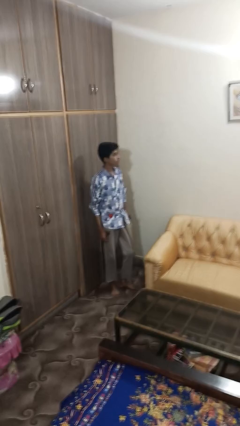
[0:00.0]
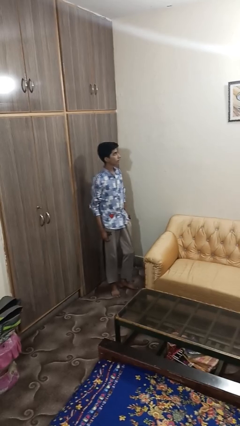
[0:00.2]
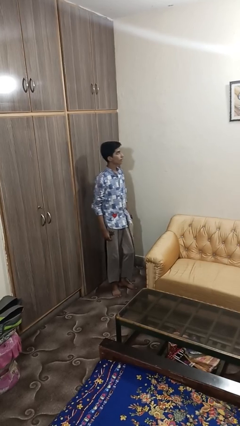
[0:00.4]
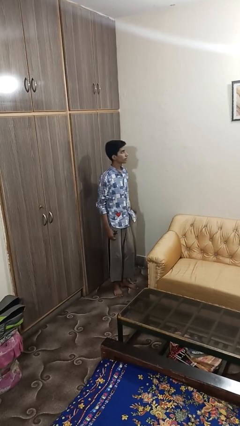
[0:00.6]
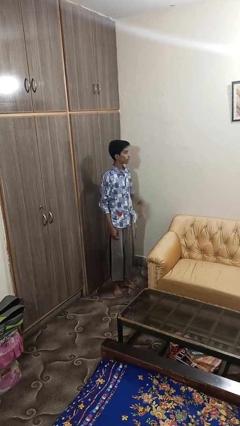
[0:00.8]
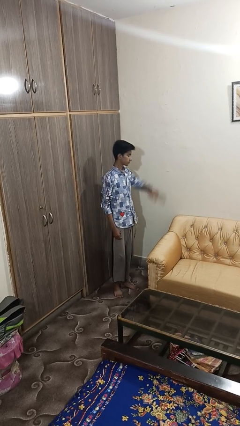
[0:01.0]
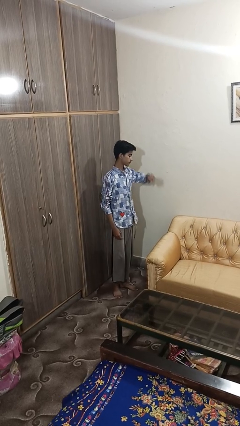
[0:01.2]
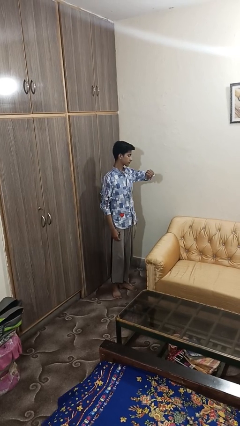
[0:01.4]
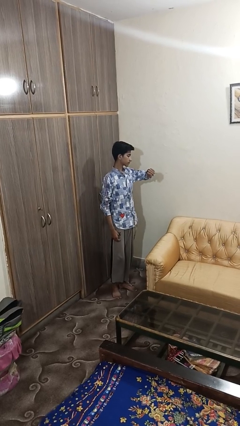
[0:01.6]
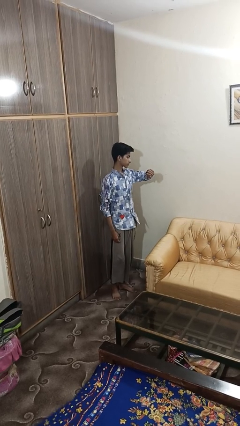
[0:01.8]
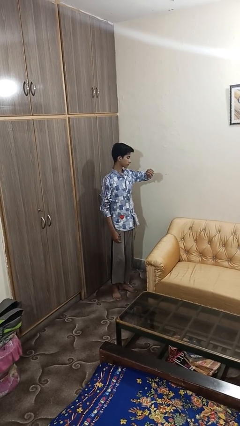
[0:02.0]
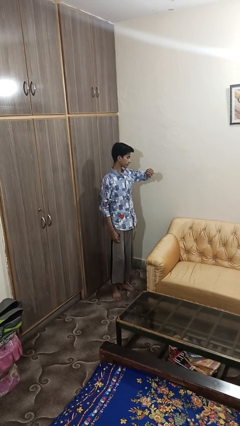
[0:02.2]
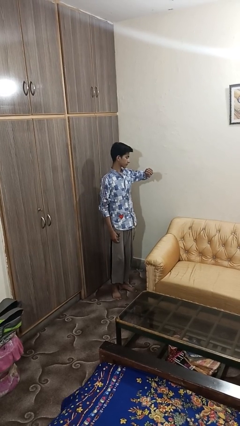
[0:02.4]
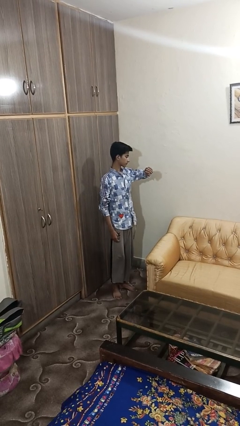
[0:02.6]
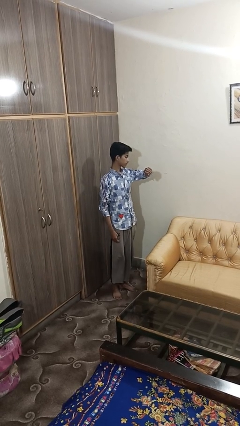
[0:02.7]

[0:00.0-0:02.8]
person looks at wristwatch

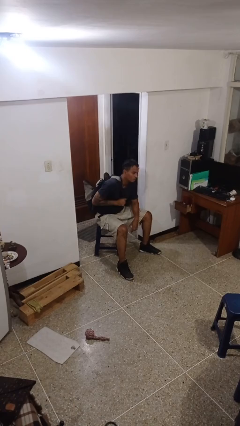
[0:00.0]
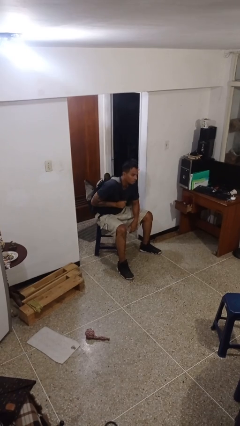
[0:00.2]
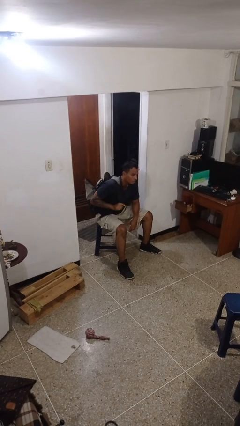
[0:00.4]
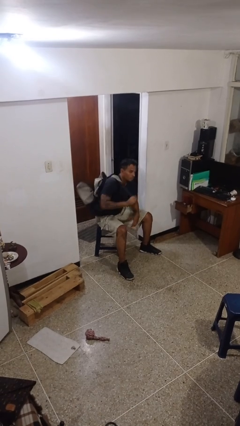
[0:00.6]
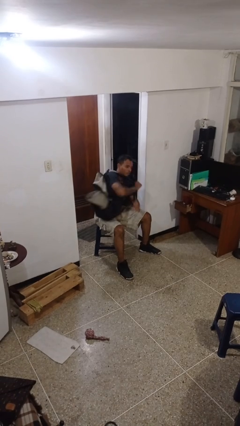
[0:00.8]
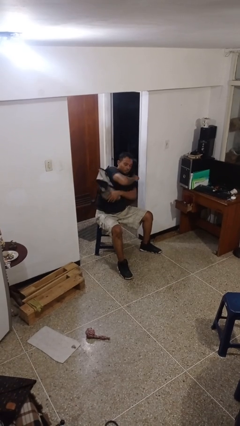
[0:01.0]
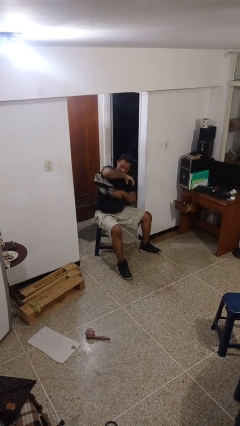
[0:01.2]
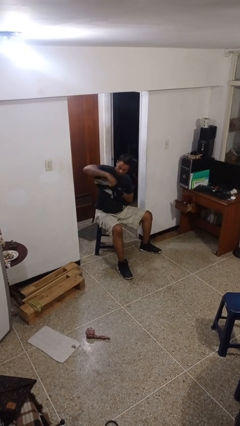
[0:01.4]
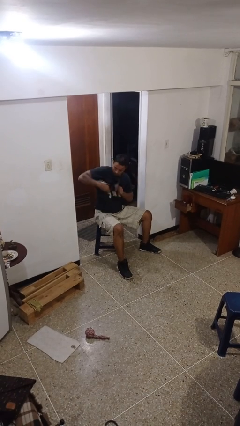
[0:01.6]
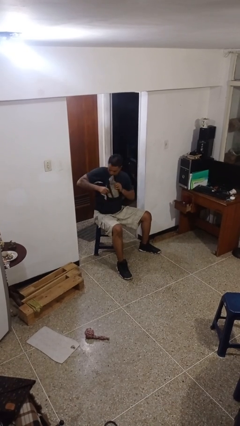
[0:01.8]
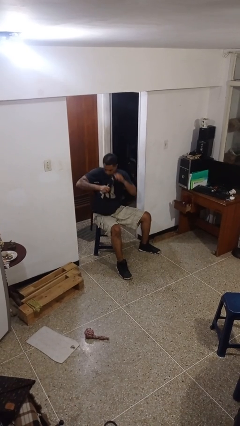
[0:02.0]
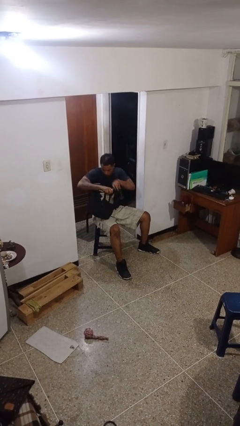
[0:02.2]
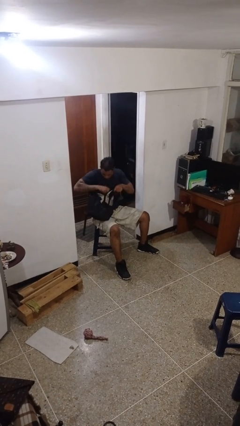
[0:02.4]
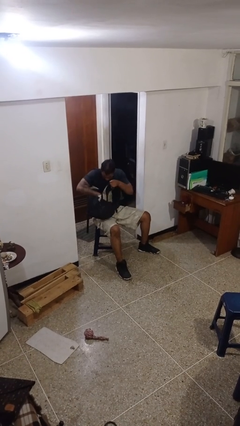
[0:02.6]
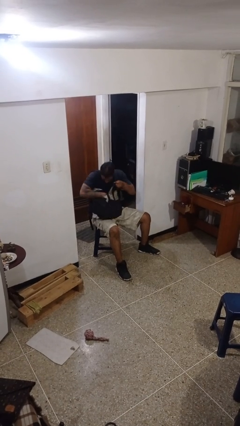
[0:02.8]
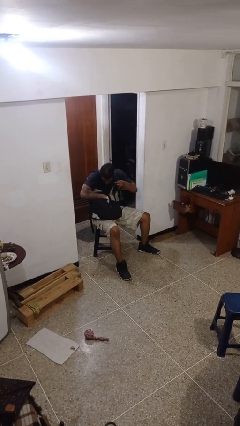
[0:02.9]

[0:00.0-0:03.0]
person searches in backpack

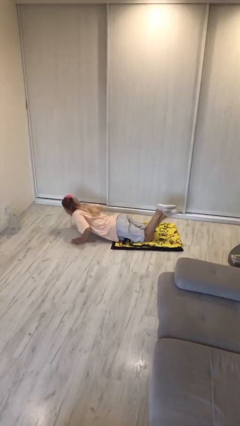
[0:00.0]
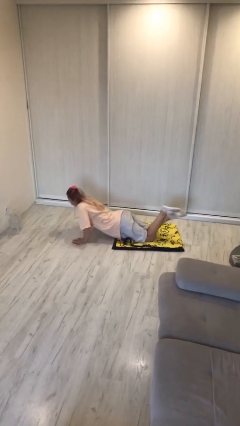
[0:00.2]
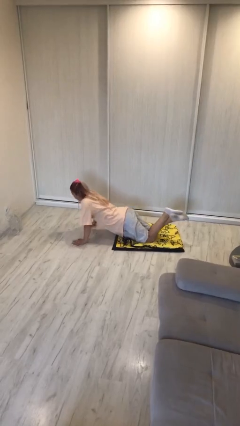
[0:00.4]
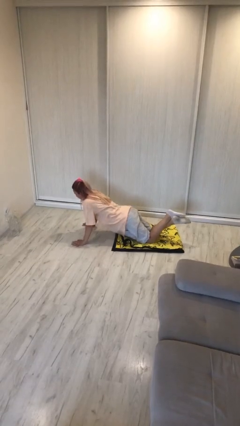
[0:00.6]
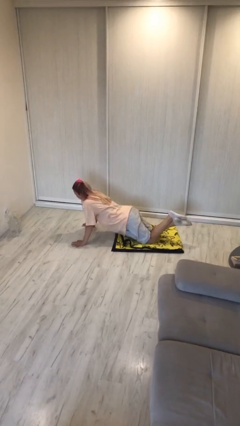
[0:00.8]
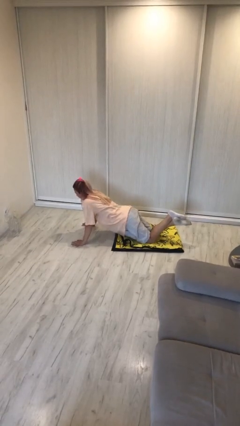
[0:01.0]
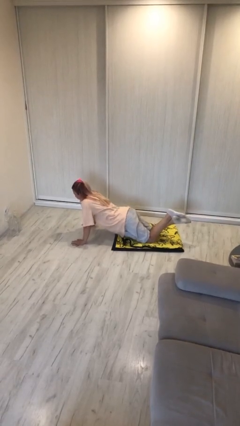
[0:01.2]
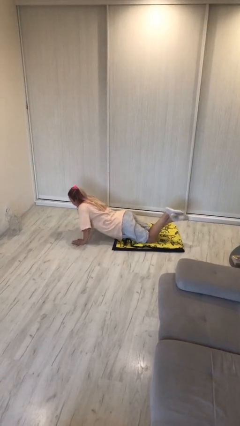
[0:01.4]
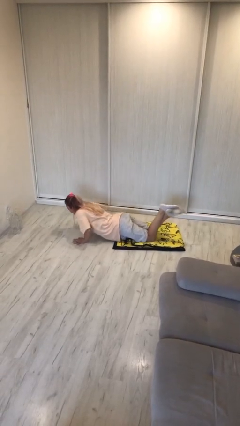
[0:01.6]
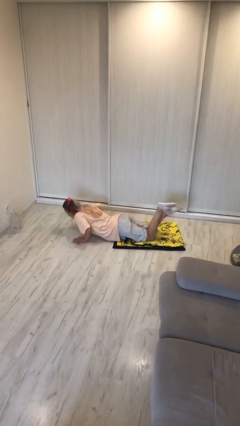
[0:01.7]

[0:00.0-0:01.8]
person exercises with pushup

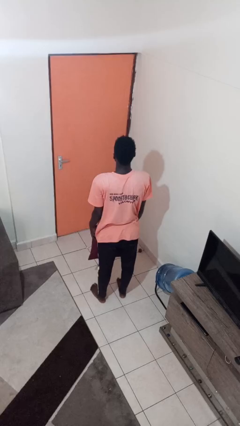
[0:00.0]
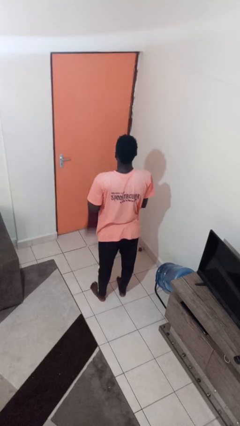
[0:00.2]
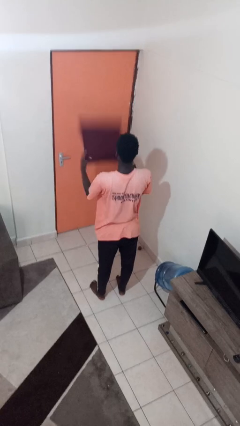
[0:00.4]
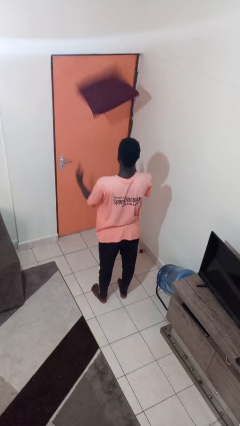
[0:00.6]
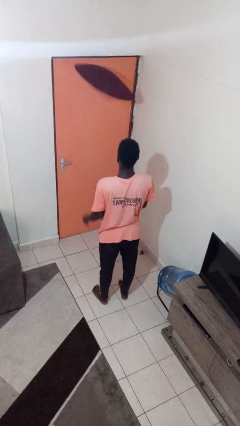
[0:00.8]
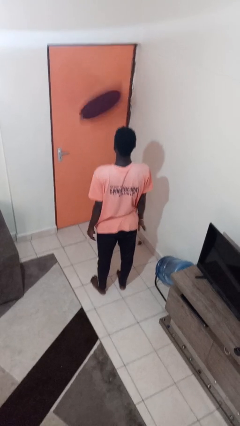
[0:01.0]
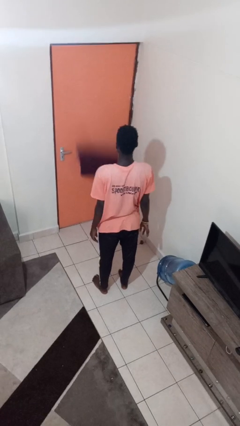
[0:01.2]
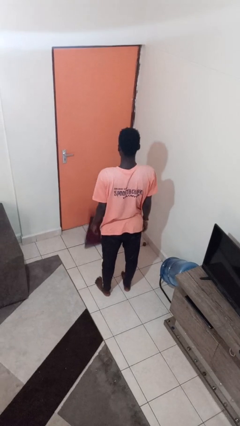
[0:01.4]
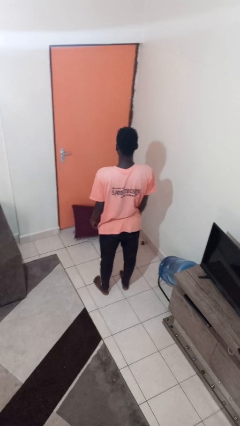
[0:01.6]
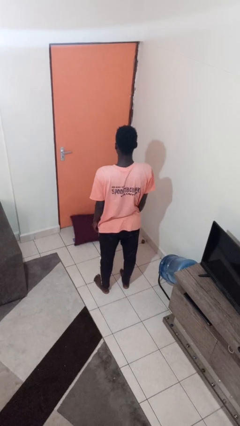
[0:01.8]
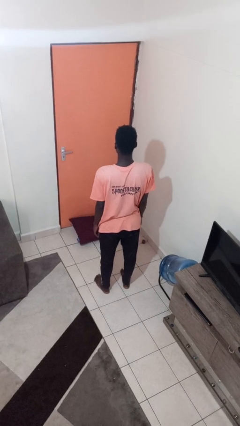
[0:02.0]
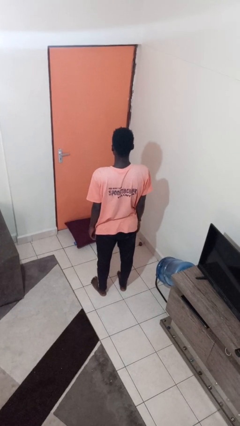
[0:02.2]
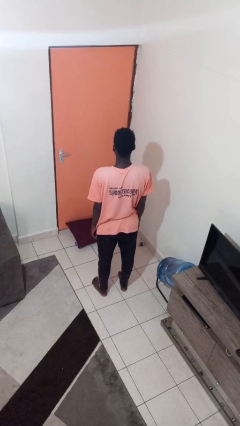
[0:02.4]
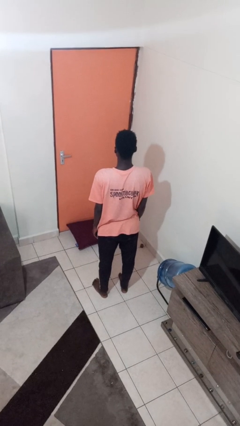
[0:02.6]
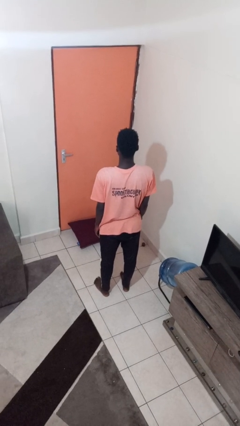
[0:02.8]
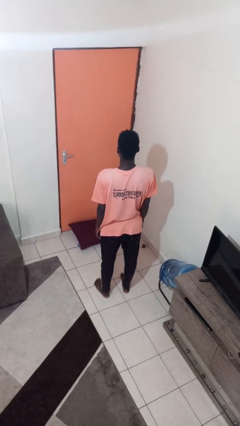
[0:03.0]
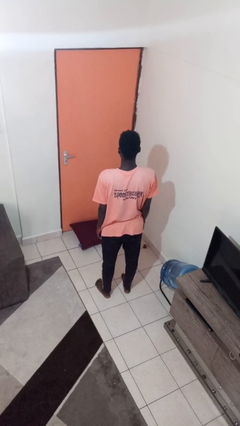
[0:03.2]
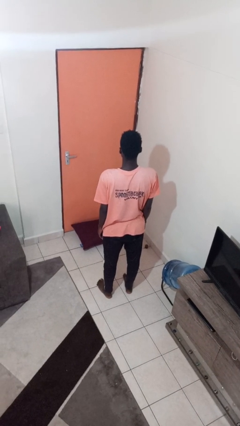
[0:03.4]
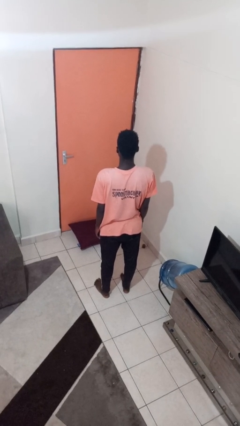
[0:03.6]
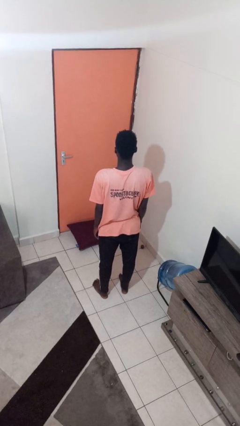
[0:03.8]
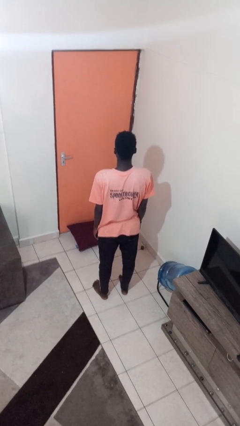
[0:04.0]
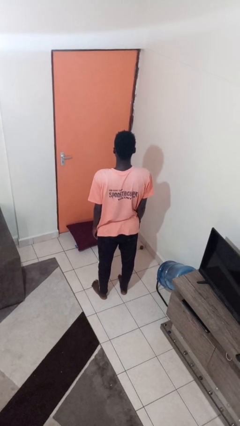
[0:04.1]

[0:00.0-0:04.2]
person throws object into air

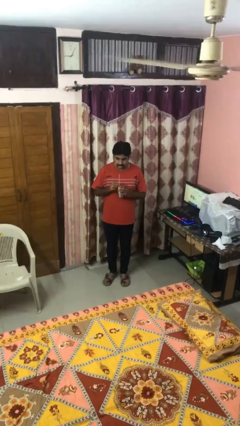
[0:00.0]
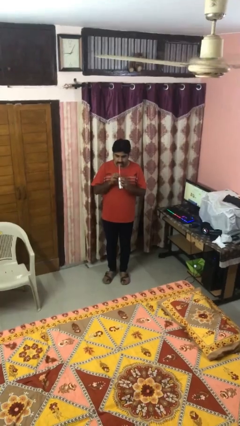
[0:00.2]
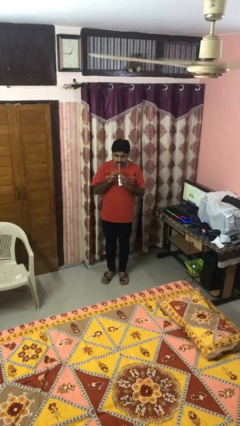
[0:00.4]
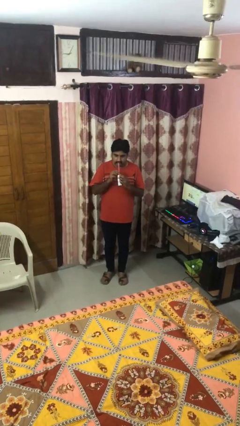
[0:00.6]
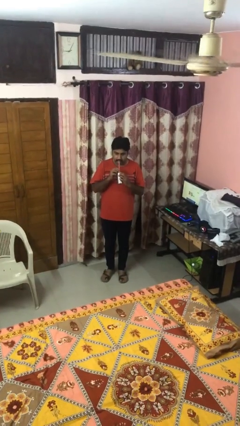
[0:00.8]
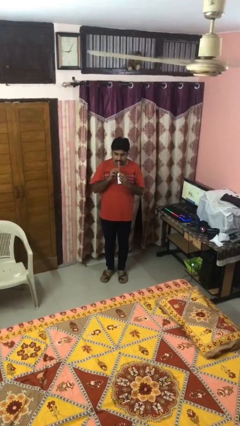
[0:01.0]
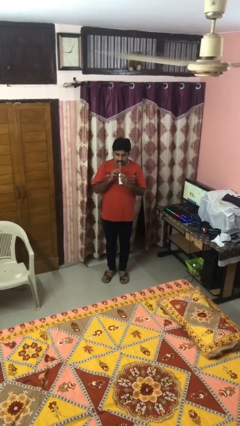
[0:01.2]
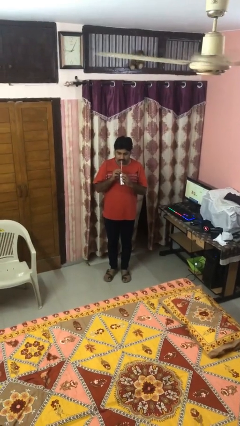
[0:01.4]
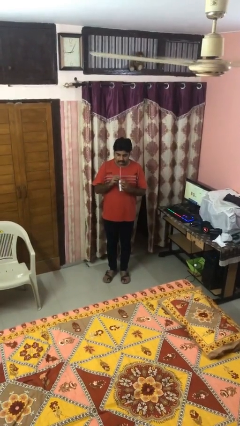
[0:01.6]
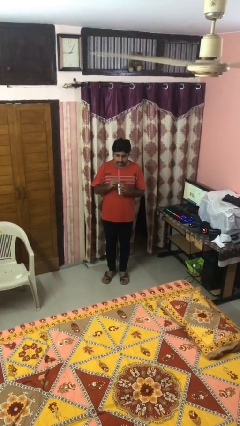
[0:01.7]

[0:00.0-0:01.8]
person drinks from straw

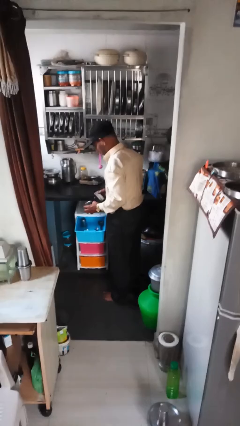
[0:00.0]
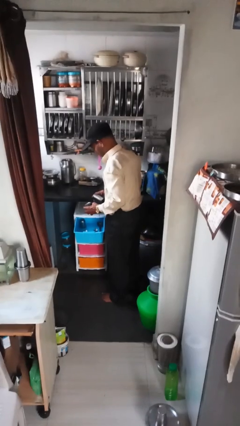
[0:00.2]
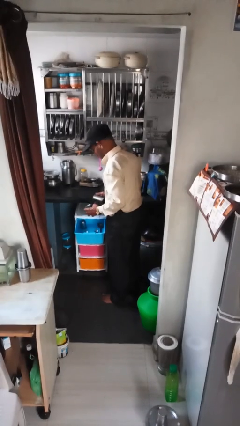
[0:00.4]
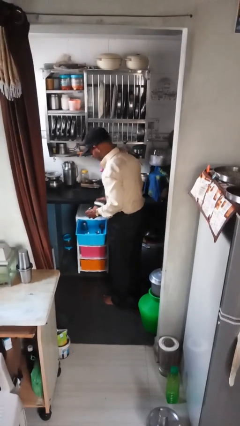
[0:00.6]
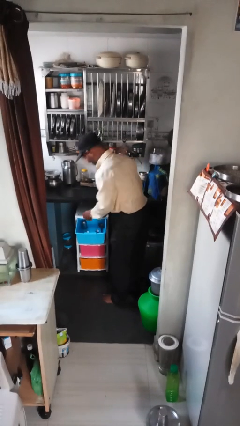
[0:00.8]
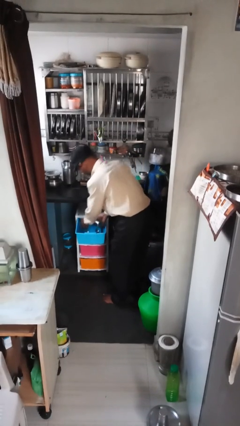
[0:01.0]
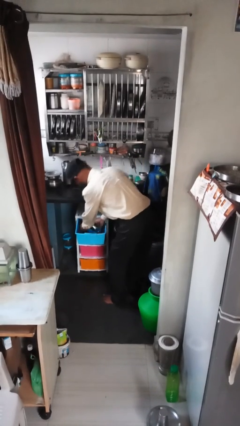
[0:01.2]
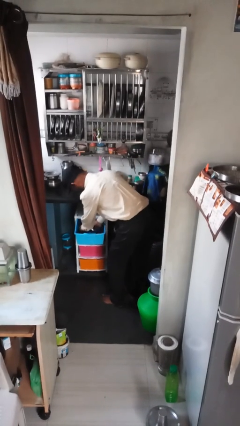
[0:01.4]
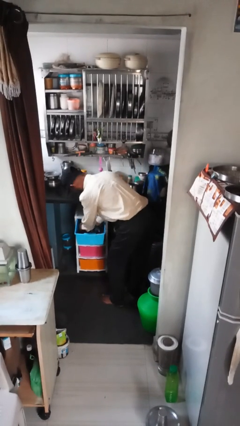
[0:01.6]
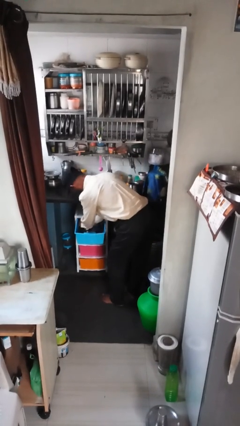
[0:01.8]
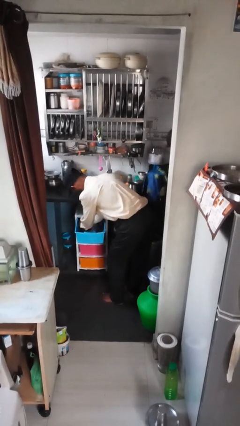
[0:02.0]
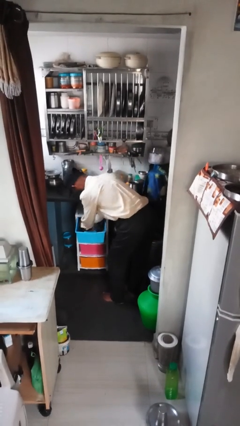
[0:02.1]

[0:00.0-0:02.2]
person puts object into kitchen drawer

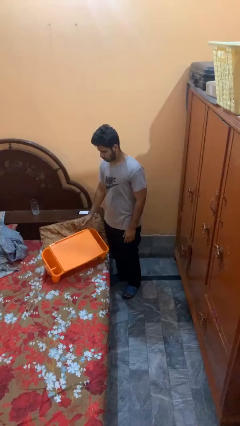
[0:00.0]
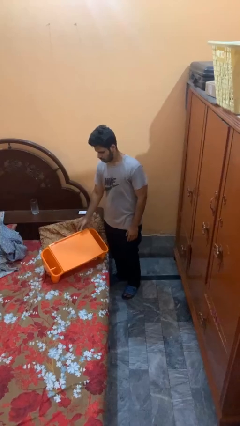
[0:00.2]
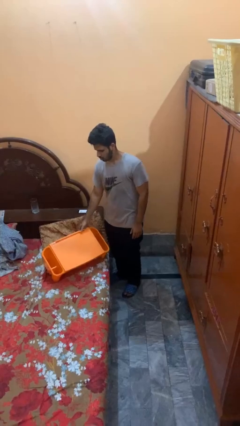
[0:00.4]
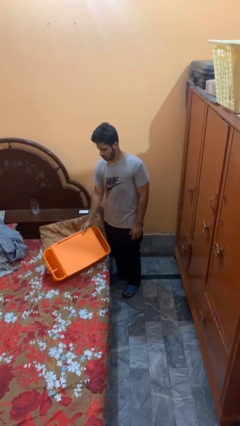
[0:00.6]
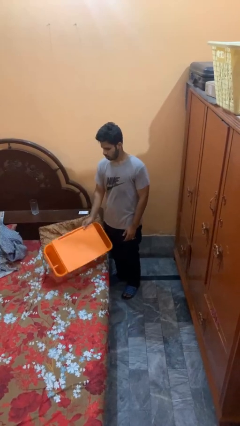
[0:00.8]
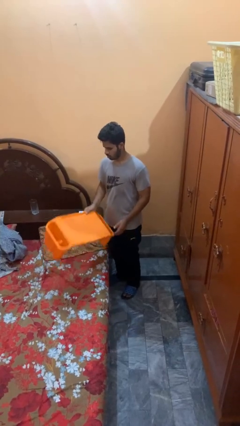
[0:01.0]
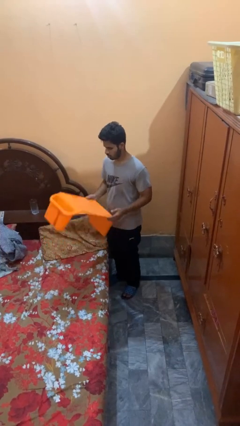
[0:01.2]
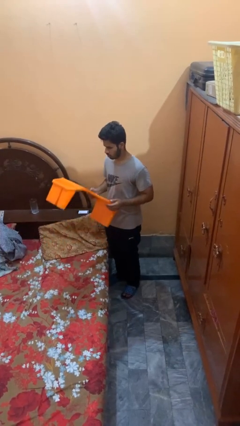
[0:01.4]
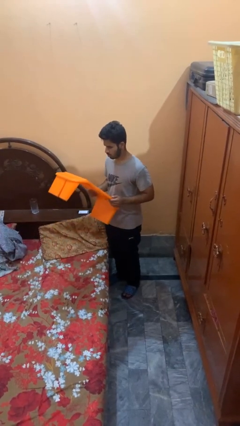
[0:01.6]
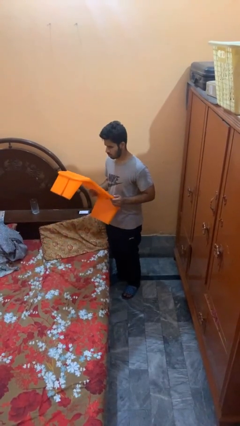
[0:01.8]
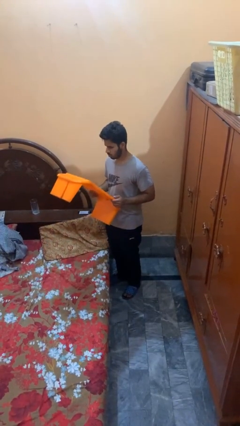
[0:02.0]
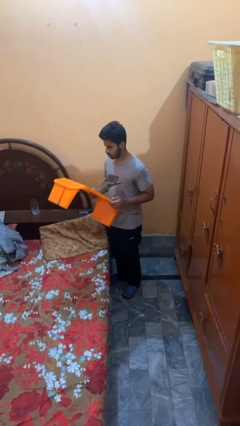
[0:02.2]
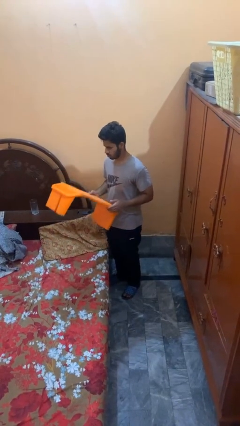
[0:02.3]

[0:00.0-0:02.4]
person picks up object from bed
